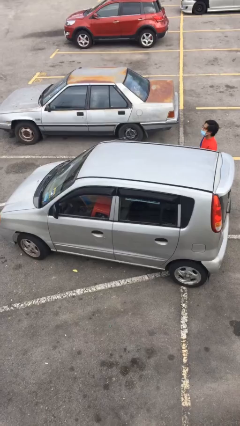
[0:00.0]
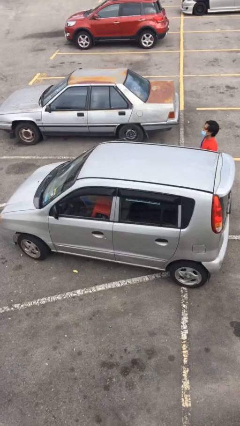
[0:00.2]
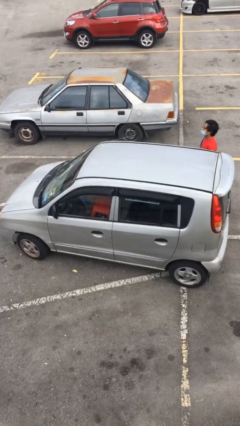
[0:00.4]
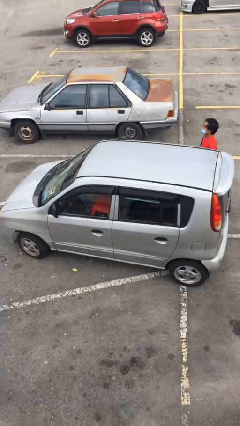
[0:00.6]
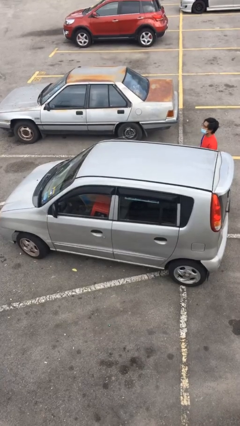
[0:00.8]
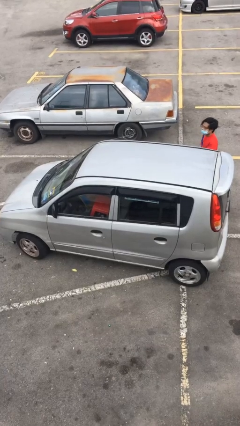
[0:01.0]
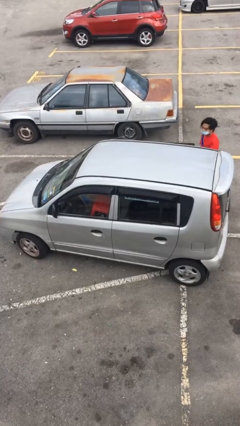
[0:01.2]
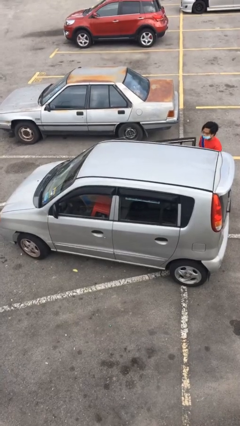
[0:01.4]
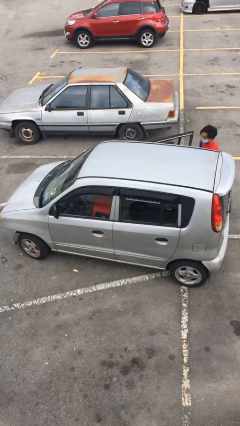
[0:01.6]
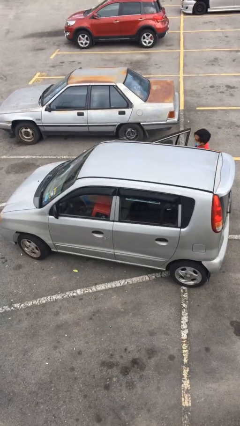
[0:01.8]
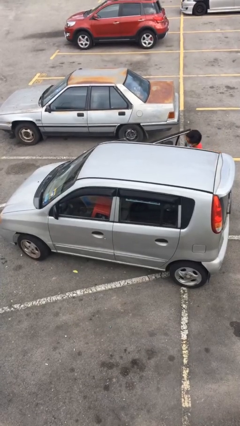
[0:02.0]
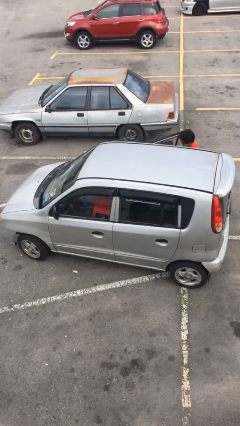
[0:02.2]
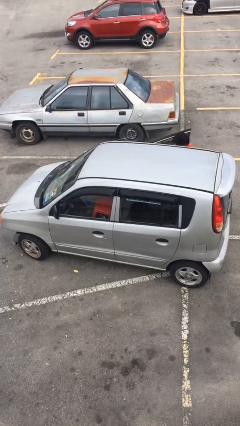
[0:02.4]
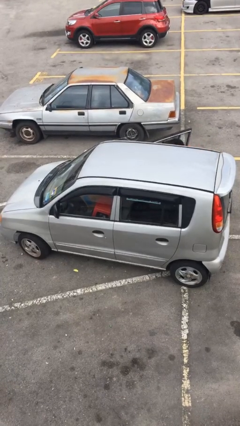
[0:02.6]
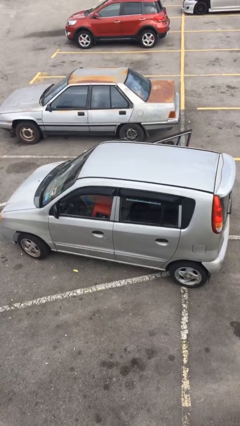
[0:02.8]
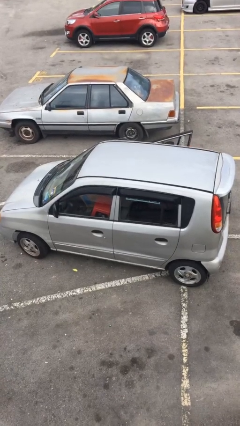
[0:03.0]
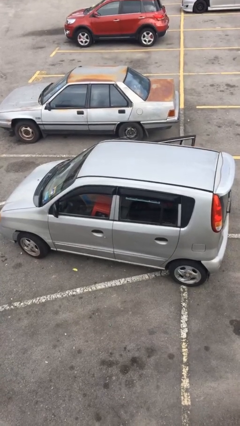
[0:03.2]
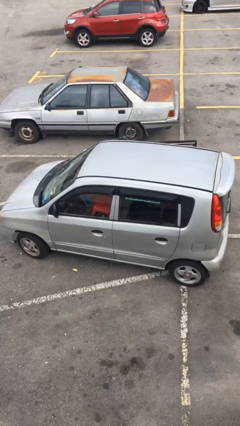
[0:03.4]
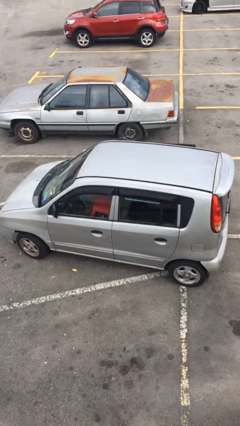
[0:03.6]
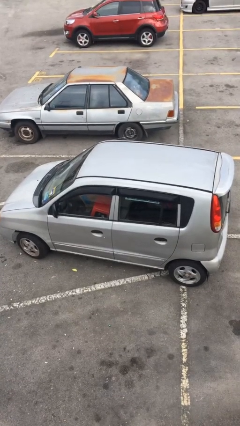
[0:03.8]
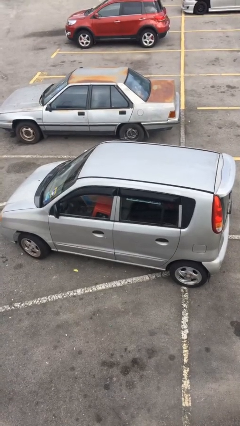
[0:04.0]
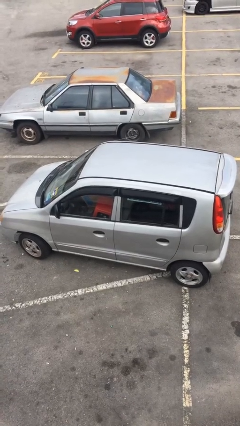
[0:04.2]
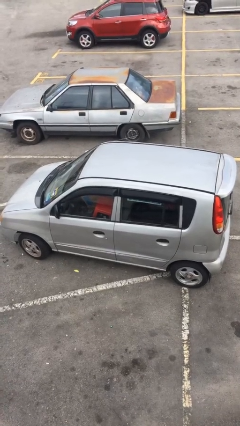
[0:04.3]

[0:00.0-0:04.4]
car picks up person

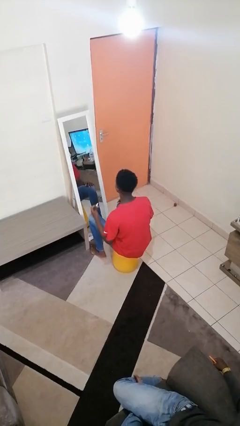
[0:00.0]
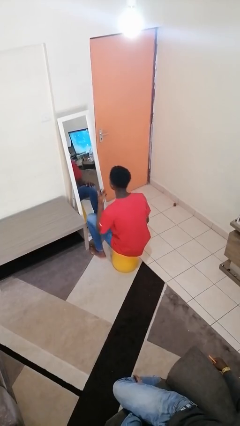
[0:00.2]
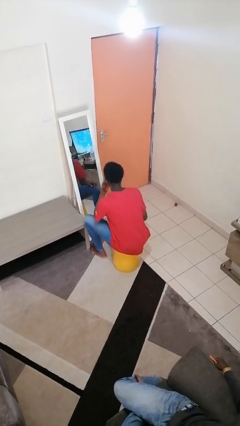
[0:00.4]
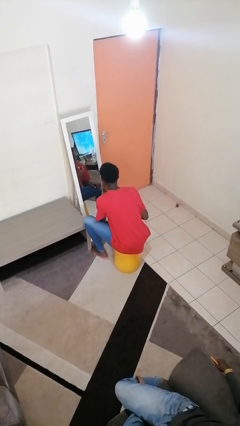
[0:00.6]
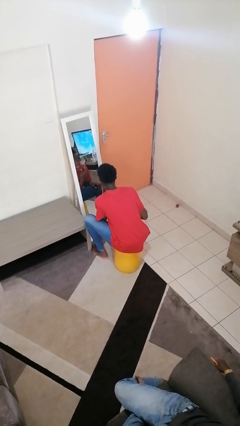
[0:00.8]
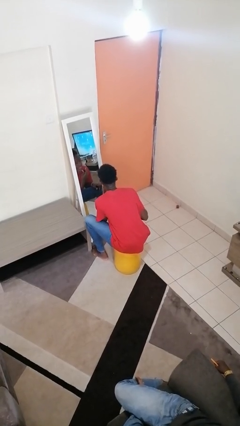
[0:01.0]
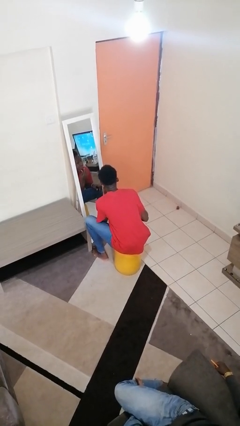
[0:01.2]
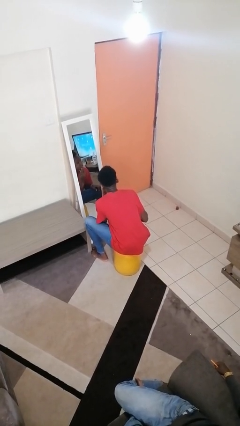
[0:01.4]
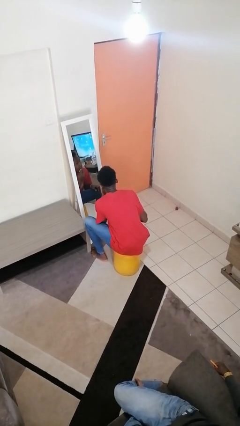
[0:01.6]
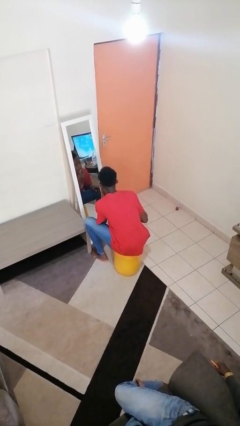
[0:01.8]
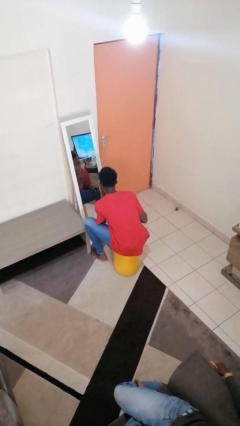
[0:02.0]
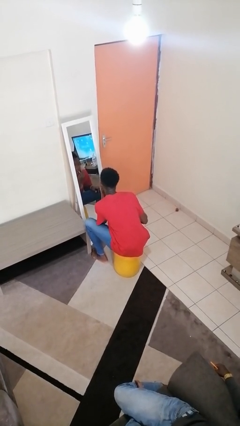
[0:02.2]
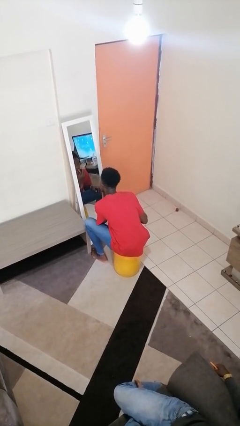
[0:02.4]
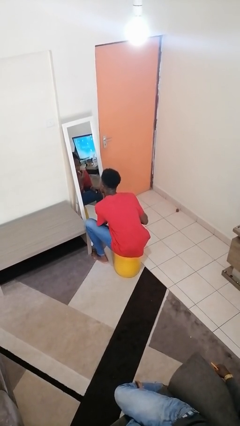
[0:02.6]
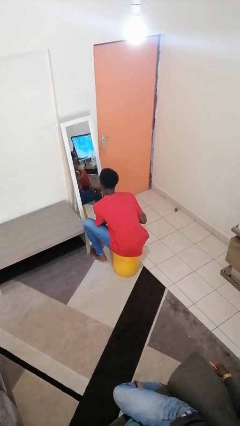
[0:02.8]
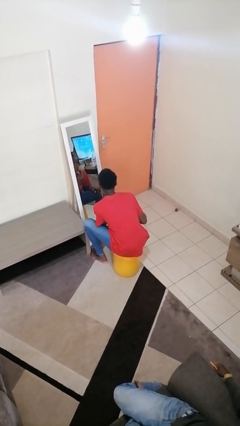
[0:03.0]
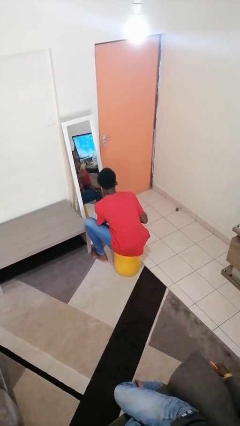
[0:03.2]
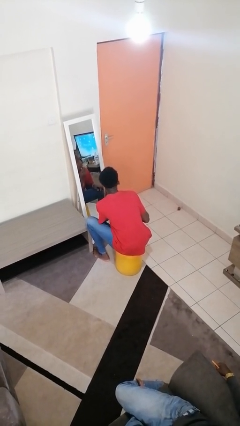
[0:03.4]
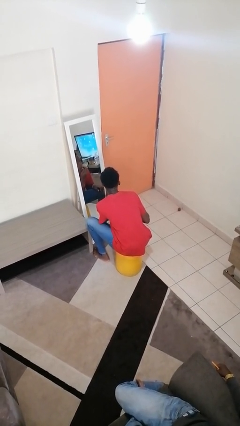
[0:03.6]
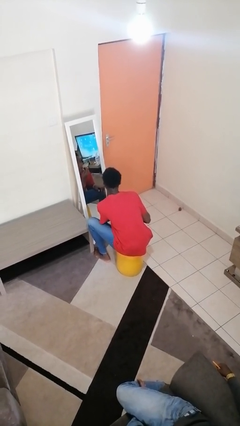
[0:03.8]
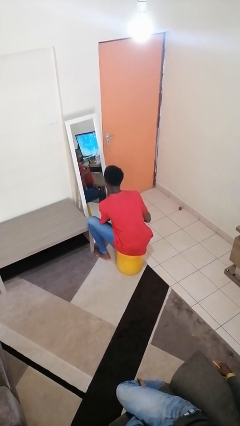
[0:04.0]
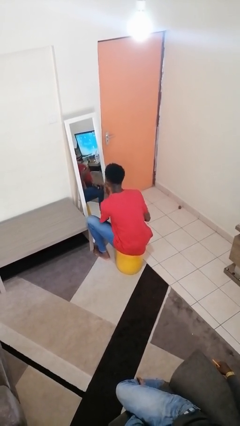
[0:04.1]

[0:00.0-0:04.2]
person applies lip makeup

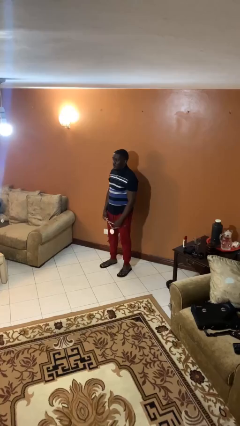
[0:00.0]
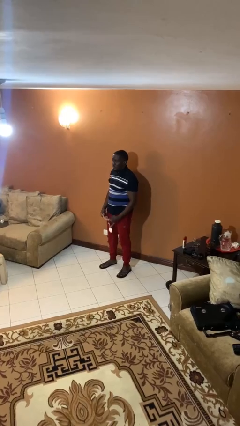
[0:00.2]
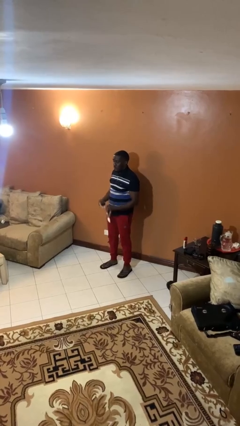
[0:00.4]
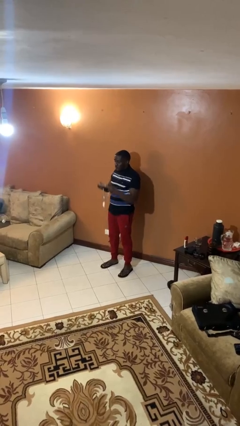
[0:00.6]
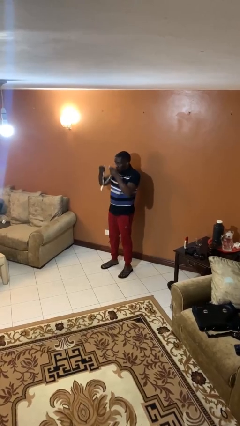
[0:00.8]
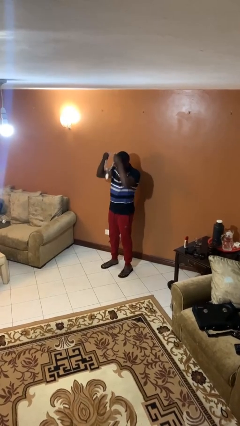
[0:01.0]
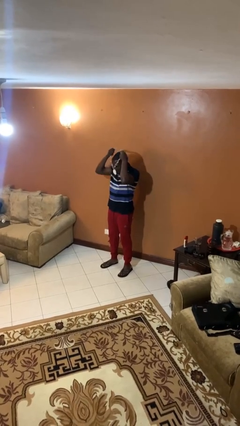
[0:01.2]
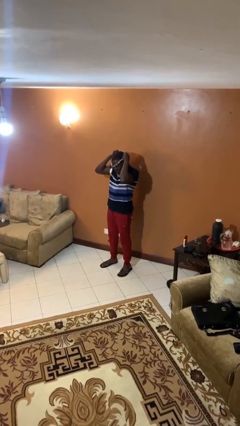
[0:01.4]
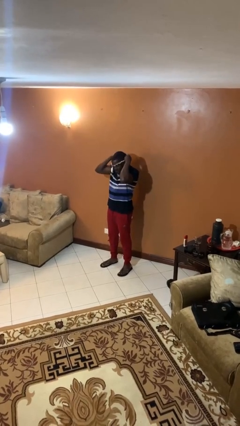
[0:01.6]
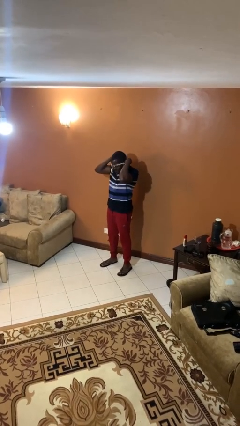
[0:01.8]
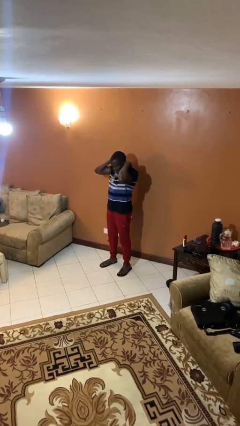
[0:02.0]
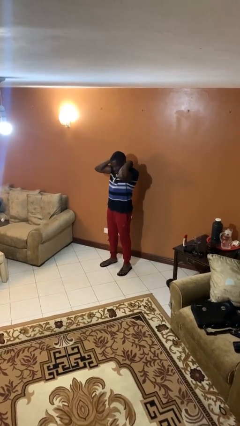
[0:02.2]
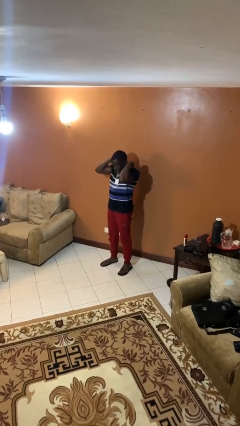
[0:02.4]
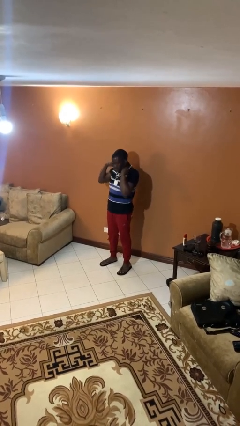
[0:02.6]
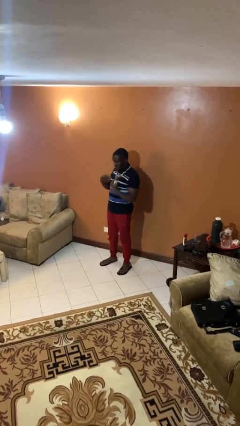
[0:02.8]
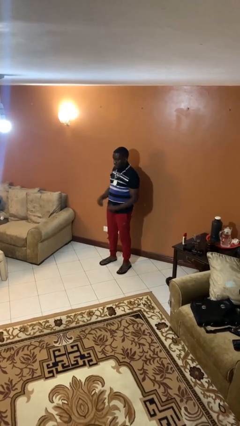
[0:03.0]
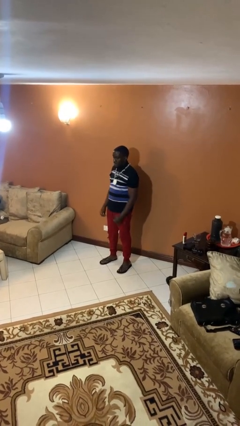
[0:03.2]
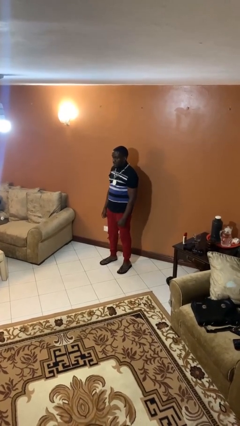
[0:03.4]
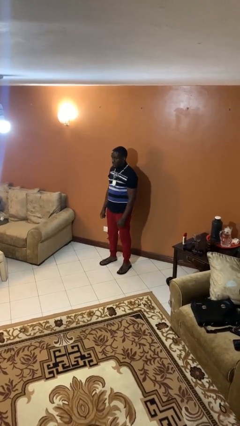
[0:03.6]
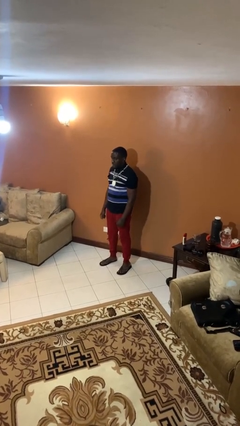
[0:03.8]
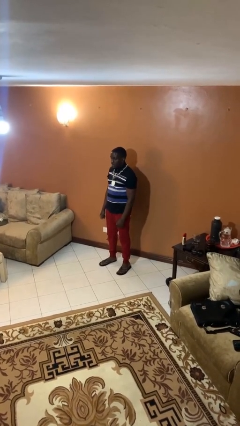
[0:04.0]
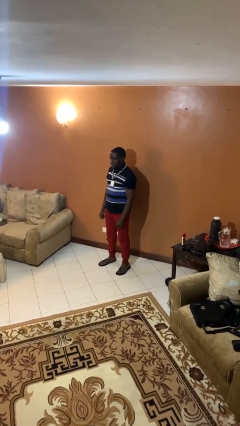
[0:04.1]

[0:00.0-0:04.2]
person puts on necklace

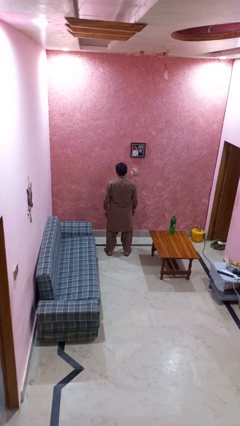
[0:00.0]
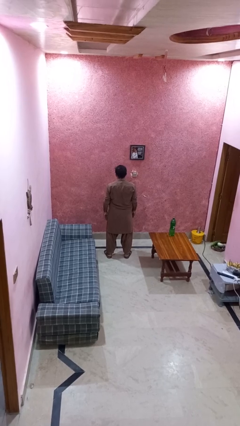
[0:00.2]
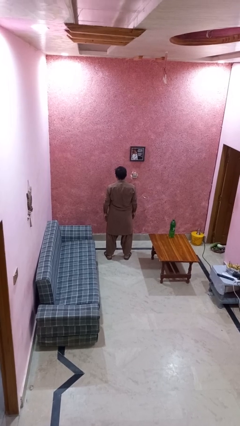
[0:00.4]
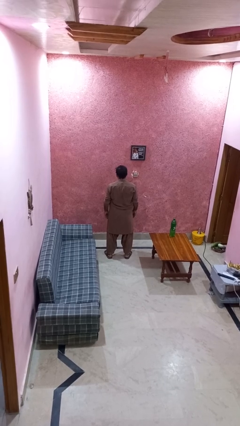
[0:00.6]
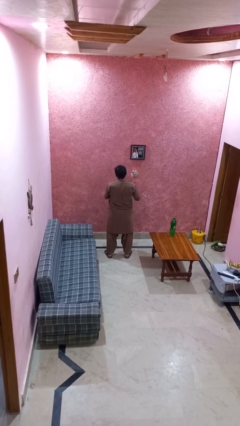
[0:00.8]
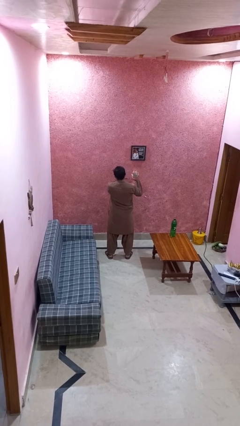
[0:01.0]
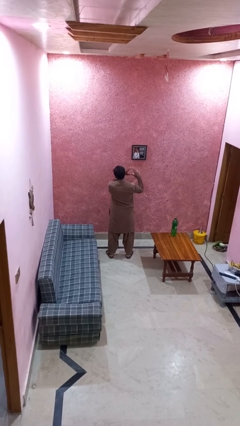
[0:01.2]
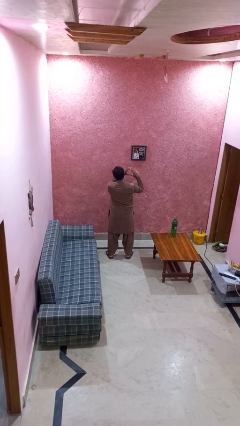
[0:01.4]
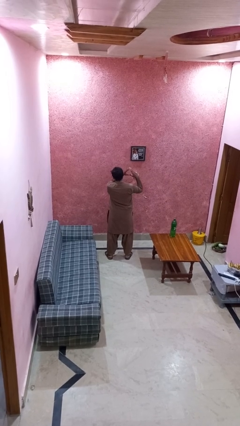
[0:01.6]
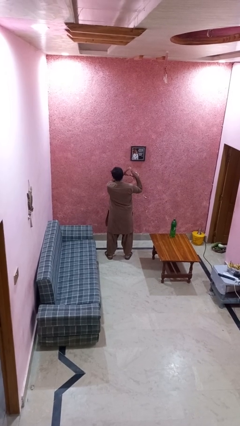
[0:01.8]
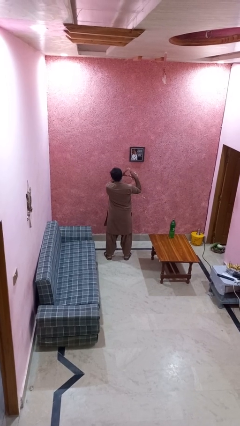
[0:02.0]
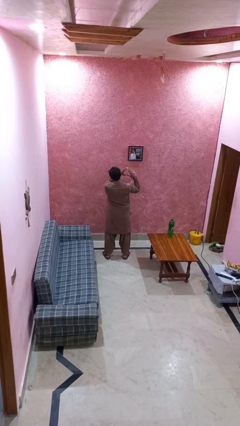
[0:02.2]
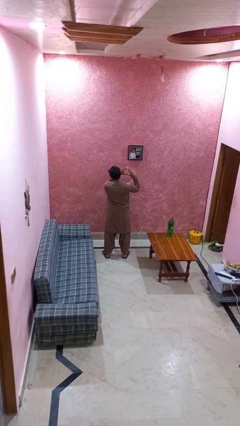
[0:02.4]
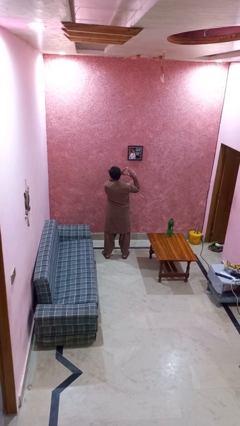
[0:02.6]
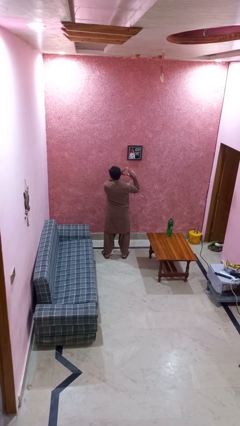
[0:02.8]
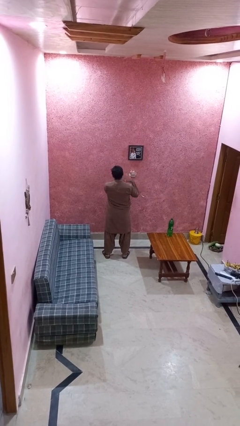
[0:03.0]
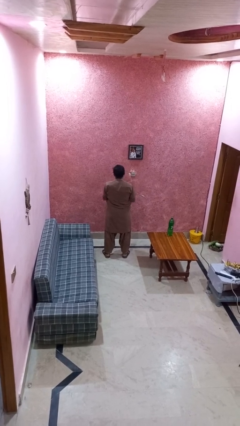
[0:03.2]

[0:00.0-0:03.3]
person gestures heart

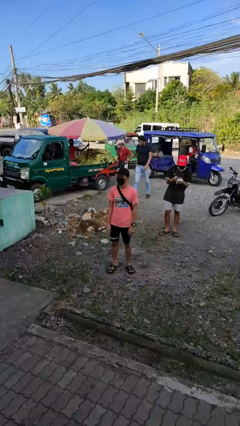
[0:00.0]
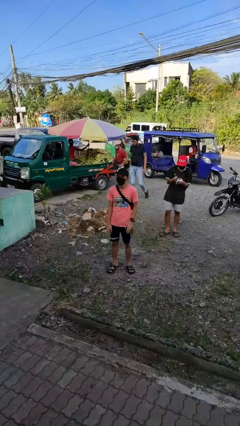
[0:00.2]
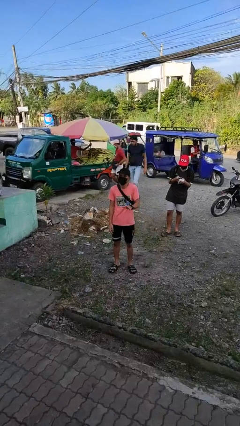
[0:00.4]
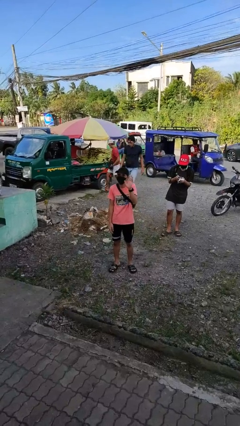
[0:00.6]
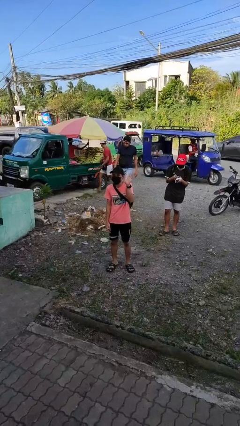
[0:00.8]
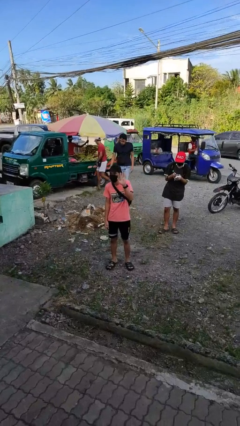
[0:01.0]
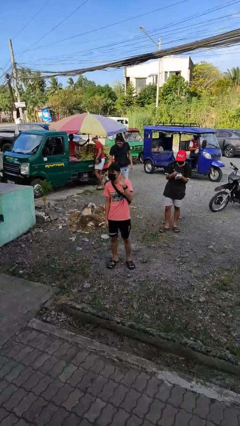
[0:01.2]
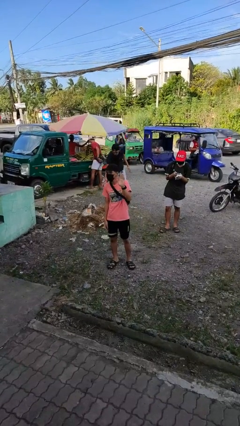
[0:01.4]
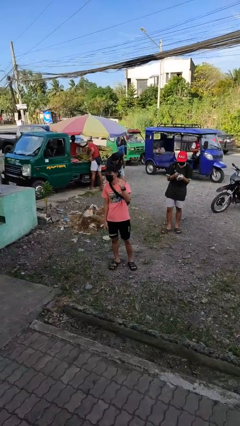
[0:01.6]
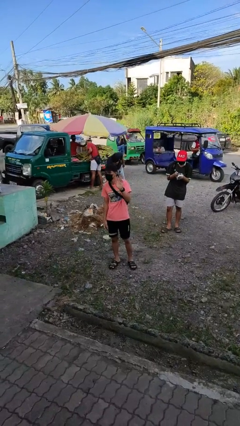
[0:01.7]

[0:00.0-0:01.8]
person waves at person

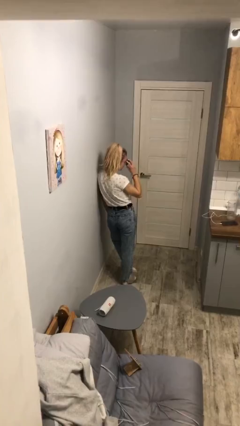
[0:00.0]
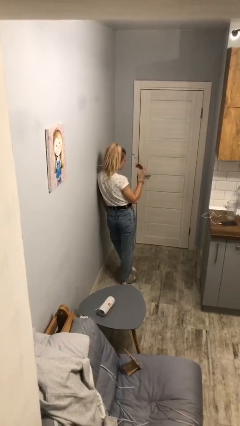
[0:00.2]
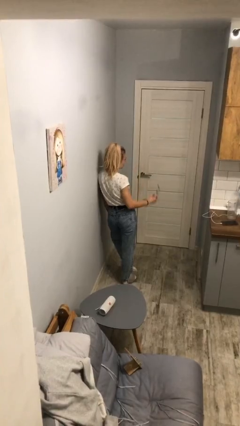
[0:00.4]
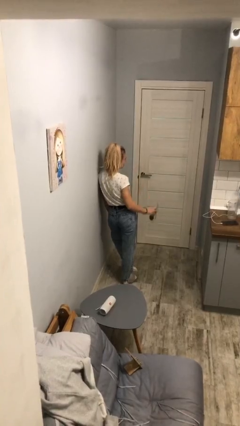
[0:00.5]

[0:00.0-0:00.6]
person takes off glasses
